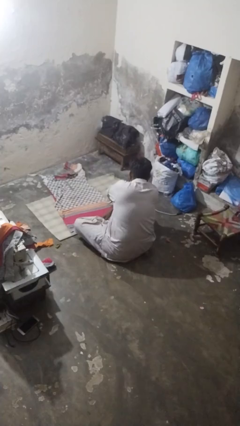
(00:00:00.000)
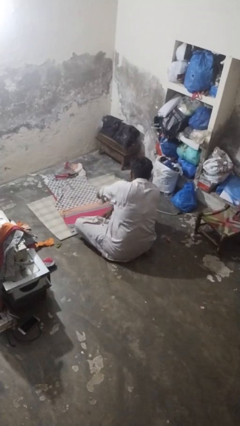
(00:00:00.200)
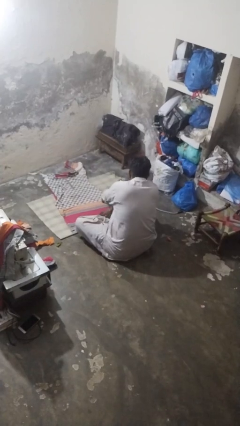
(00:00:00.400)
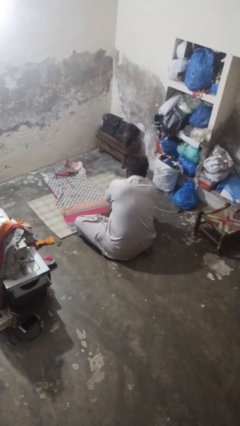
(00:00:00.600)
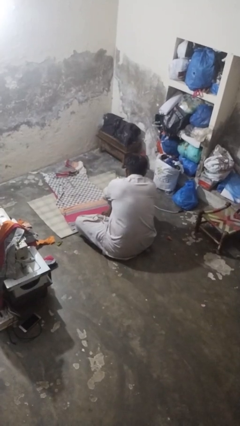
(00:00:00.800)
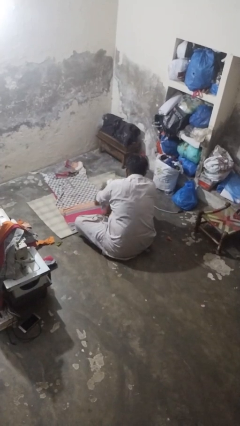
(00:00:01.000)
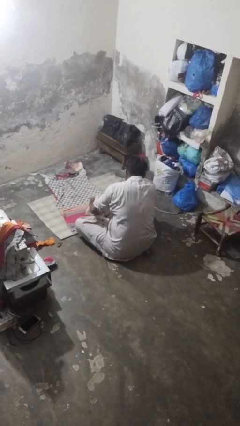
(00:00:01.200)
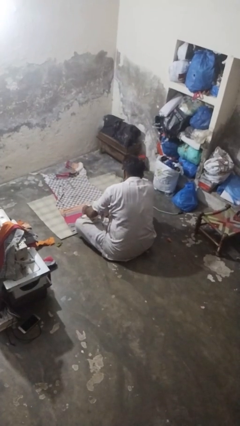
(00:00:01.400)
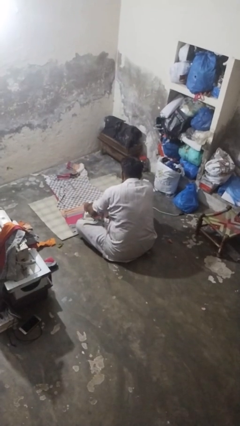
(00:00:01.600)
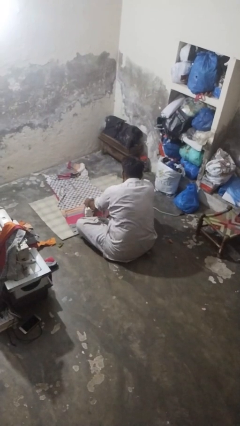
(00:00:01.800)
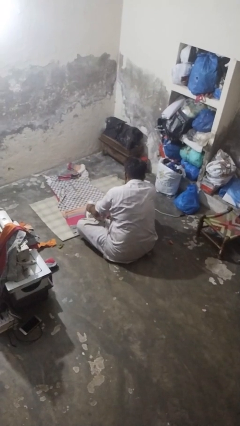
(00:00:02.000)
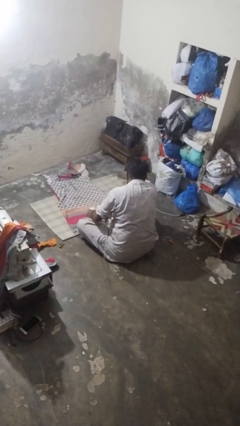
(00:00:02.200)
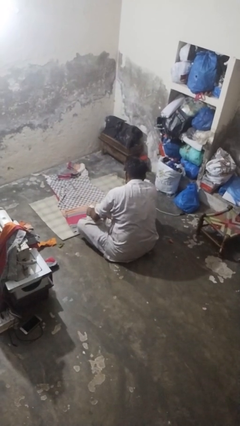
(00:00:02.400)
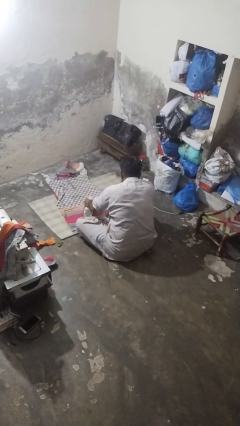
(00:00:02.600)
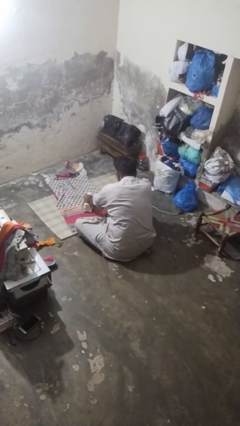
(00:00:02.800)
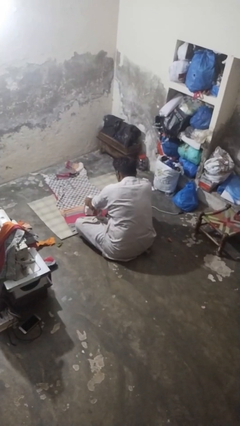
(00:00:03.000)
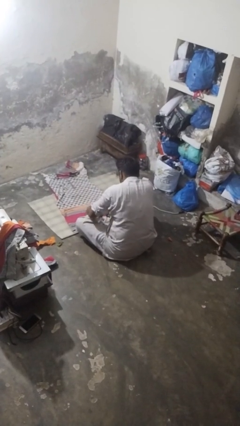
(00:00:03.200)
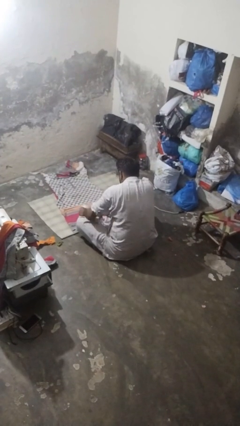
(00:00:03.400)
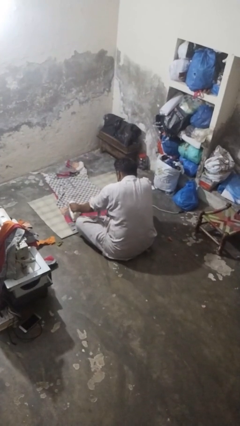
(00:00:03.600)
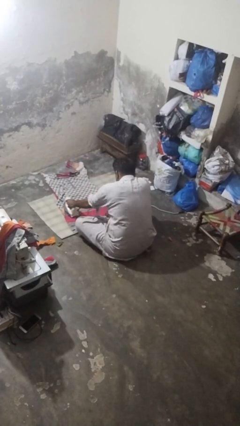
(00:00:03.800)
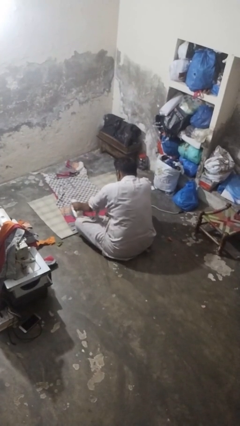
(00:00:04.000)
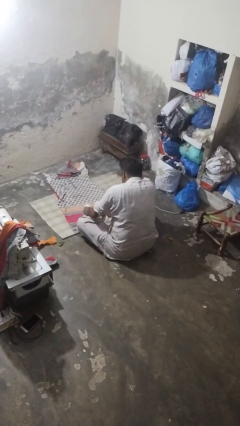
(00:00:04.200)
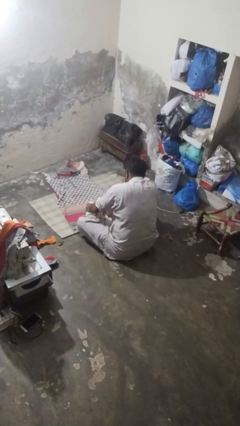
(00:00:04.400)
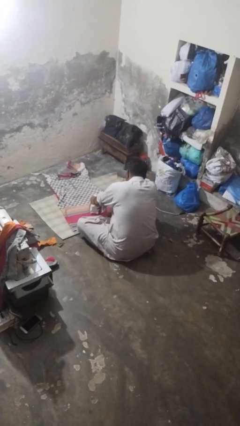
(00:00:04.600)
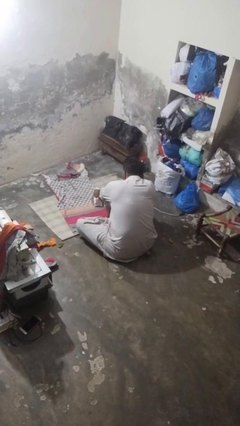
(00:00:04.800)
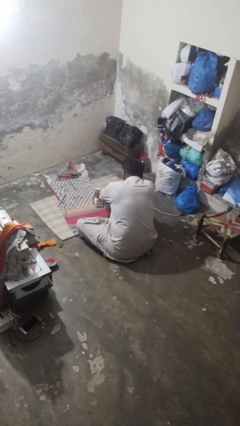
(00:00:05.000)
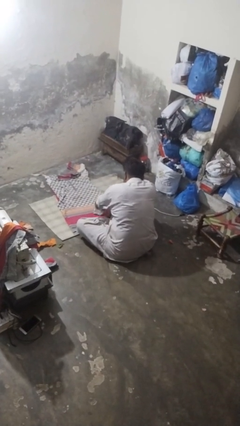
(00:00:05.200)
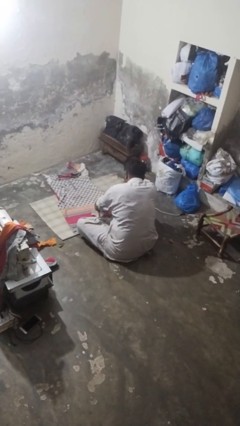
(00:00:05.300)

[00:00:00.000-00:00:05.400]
person irons clothes

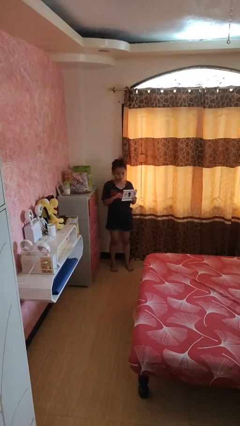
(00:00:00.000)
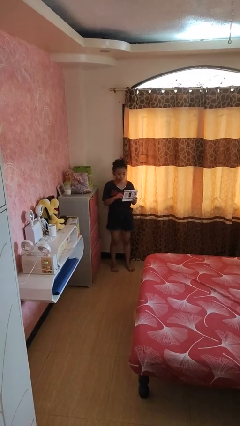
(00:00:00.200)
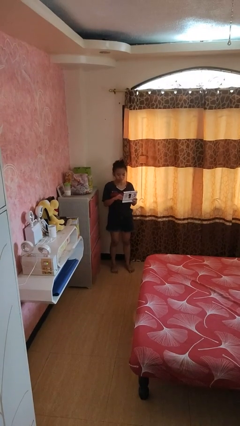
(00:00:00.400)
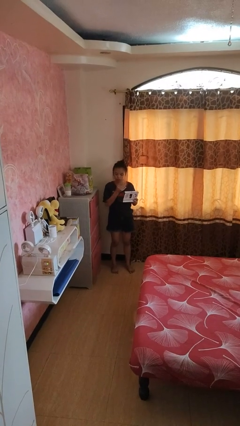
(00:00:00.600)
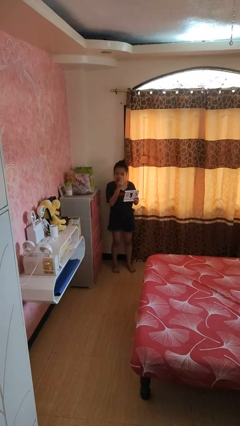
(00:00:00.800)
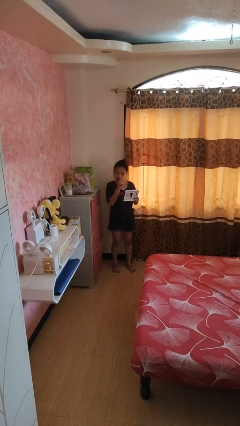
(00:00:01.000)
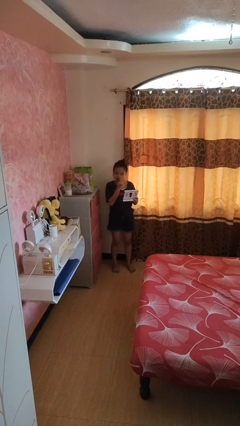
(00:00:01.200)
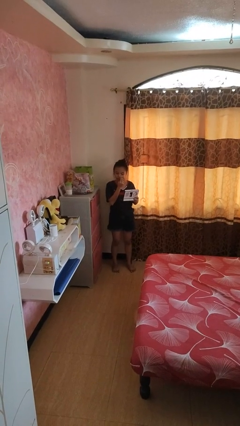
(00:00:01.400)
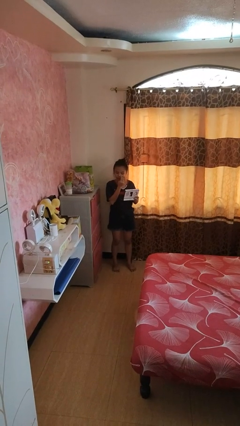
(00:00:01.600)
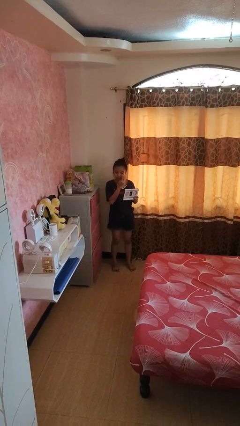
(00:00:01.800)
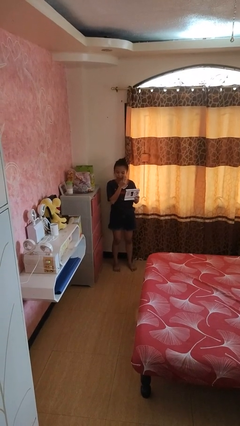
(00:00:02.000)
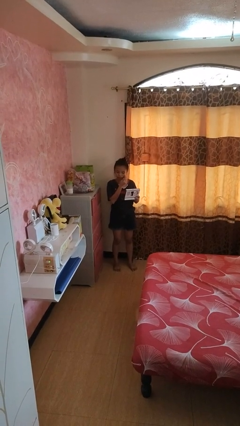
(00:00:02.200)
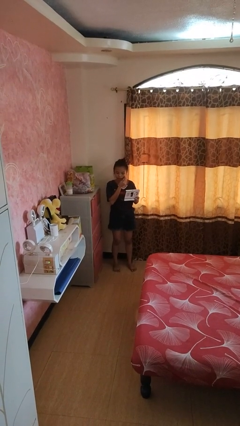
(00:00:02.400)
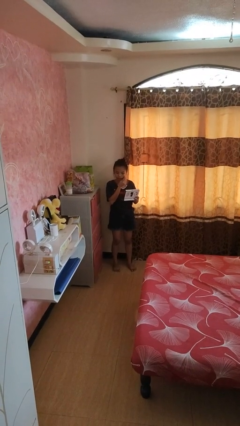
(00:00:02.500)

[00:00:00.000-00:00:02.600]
person applies foundation makeup

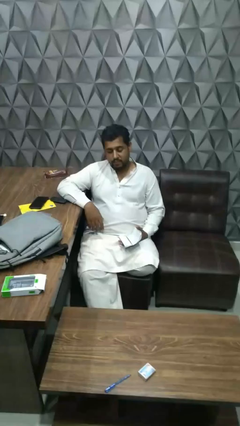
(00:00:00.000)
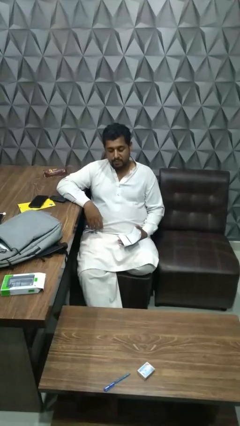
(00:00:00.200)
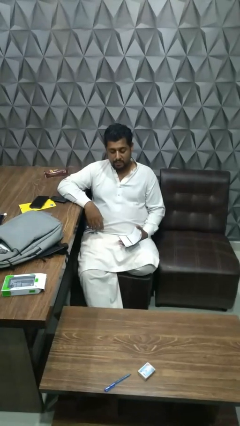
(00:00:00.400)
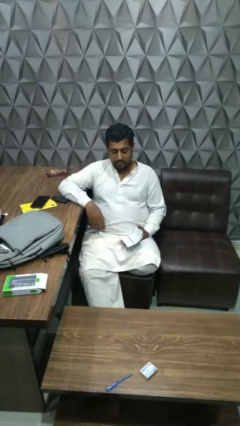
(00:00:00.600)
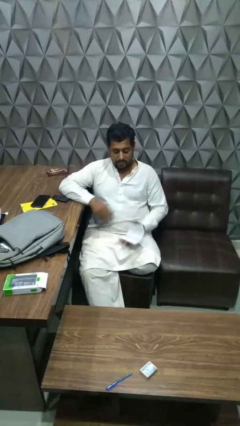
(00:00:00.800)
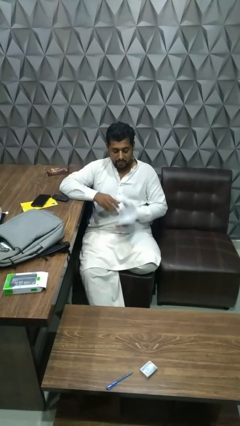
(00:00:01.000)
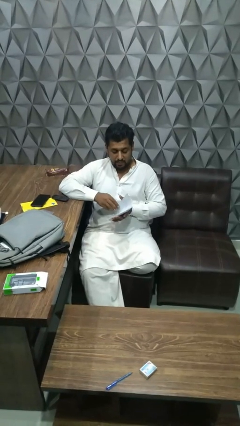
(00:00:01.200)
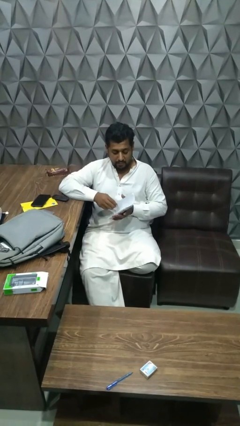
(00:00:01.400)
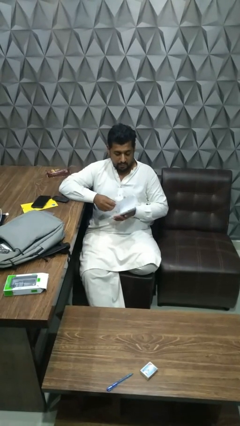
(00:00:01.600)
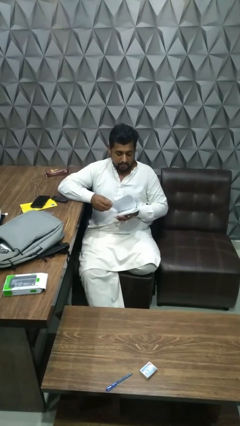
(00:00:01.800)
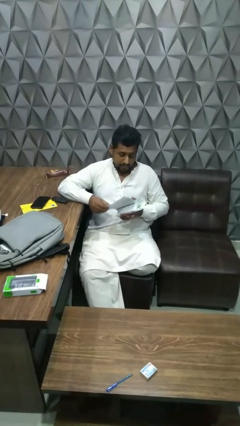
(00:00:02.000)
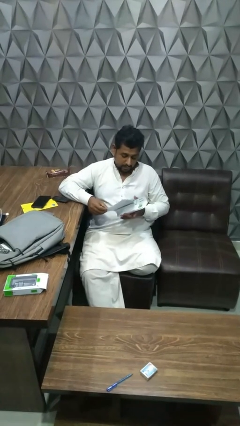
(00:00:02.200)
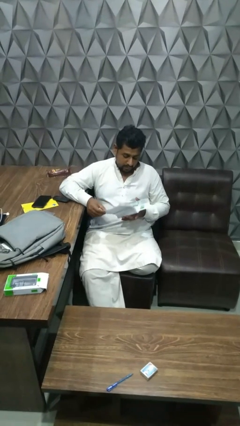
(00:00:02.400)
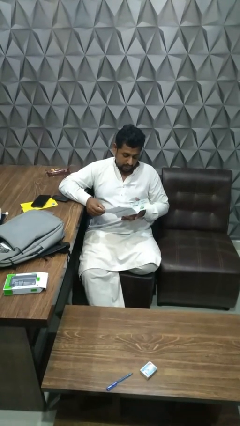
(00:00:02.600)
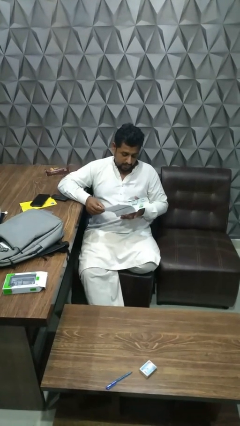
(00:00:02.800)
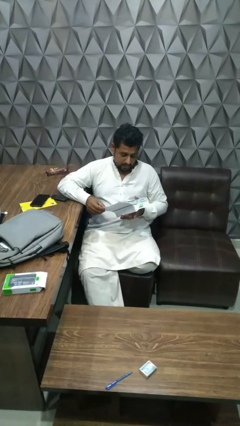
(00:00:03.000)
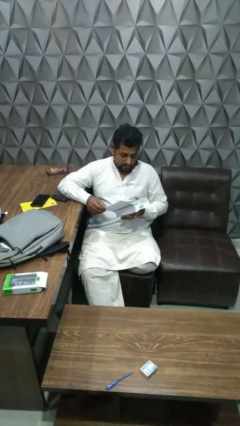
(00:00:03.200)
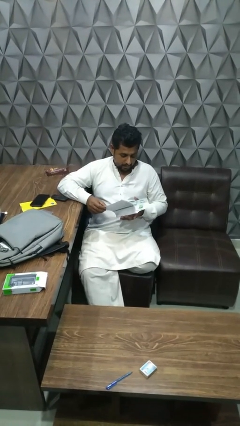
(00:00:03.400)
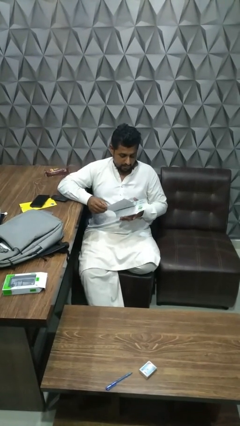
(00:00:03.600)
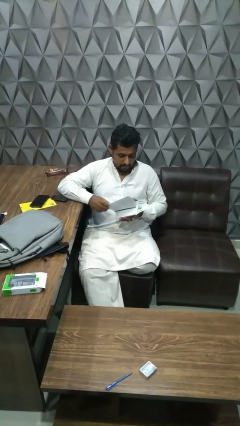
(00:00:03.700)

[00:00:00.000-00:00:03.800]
person reads magazine

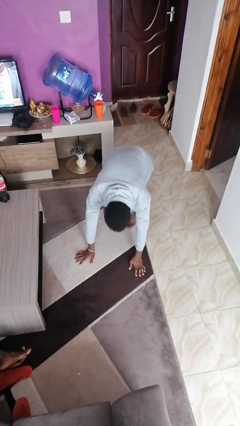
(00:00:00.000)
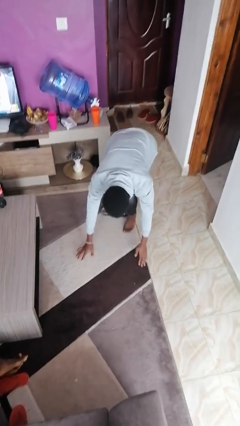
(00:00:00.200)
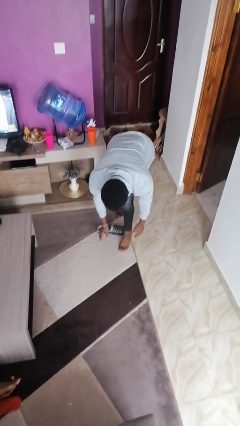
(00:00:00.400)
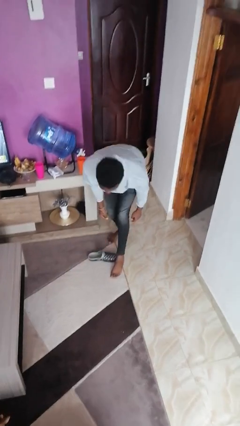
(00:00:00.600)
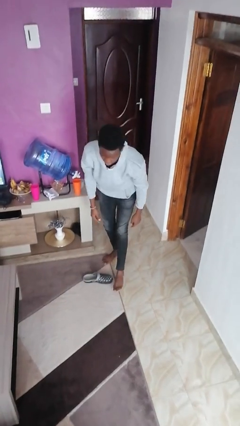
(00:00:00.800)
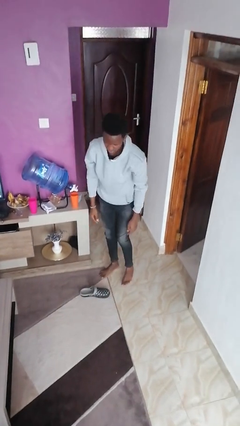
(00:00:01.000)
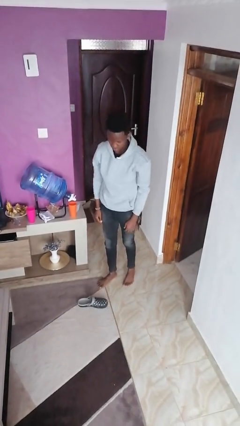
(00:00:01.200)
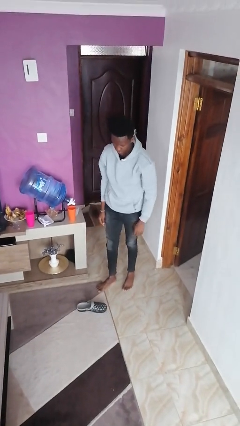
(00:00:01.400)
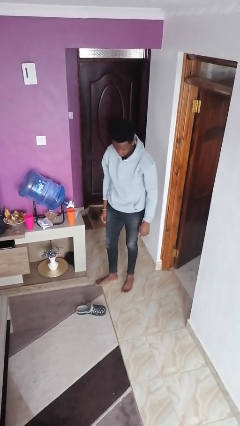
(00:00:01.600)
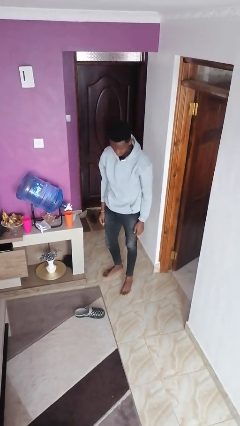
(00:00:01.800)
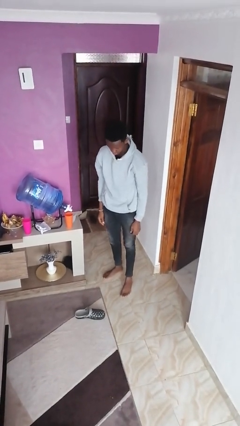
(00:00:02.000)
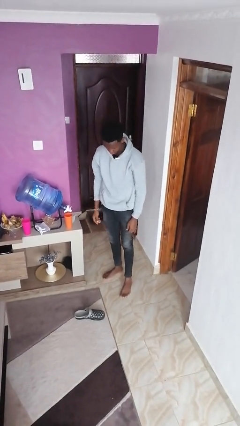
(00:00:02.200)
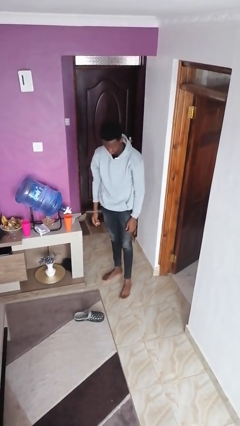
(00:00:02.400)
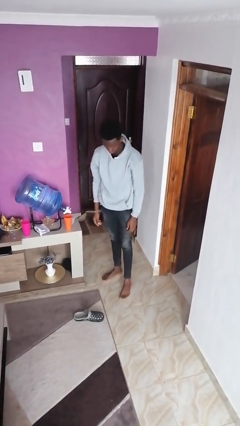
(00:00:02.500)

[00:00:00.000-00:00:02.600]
person stands up from floor

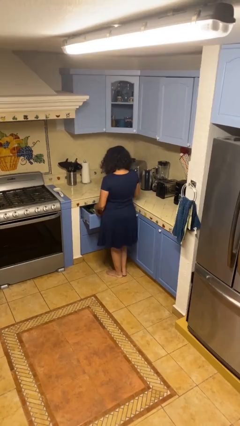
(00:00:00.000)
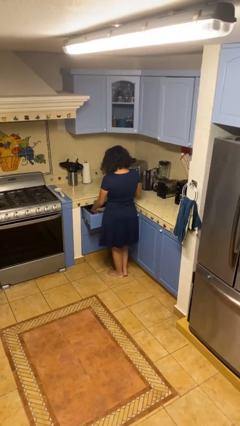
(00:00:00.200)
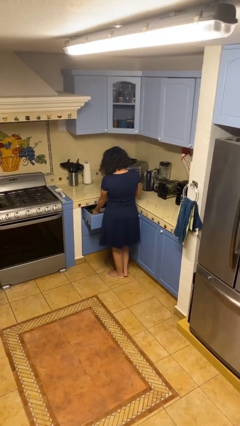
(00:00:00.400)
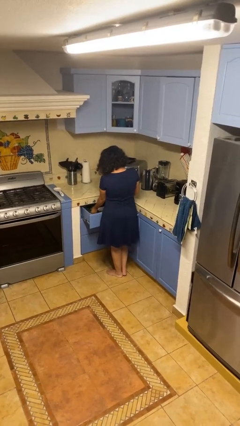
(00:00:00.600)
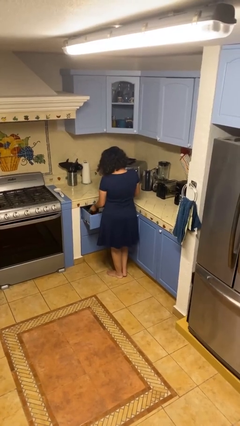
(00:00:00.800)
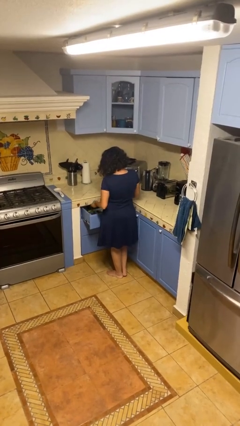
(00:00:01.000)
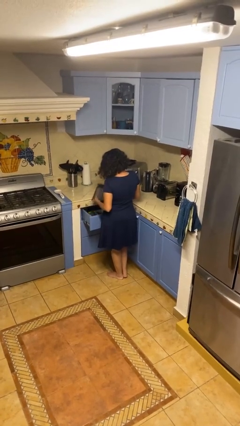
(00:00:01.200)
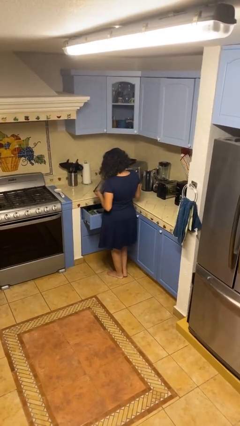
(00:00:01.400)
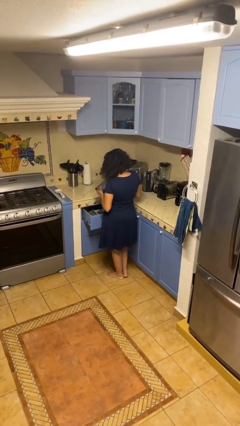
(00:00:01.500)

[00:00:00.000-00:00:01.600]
person takes object from kitchen drawer

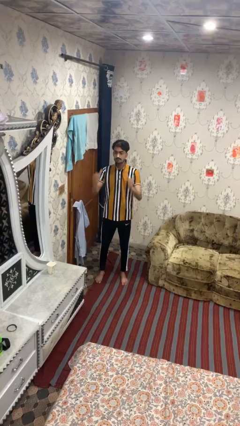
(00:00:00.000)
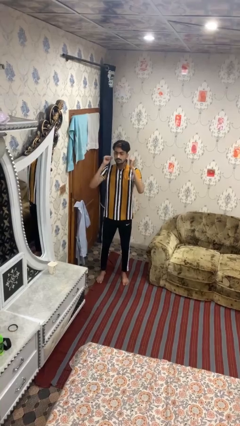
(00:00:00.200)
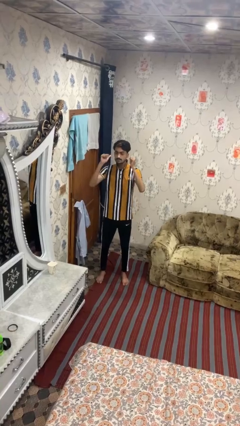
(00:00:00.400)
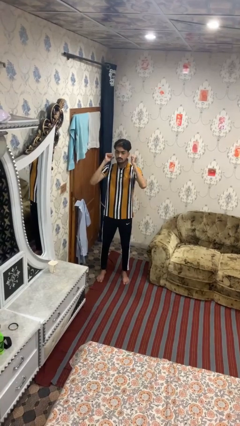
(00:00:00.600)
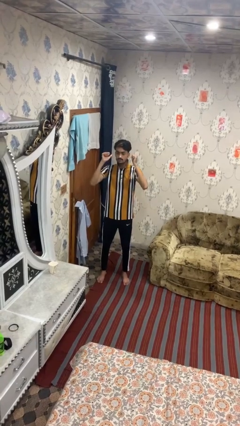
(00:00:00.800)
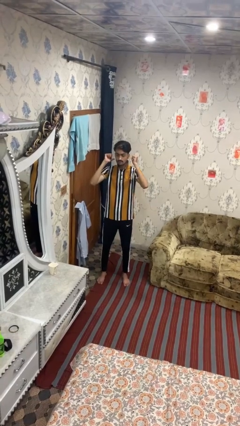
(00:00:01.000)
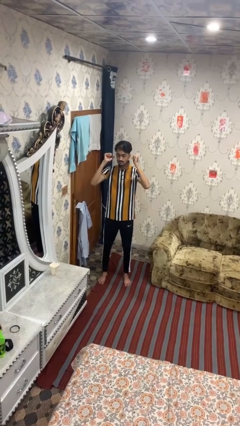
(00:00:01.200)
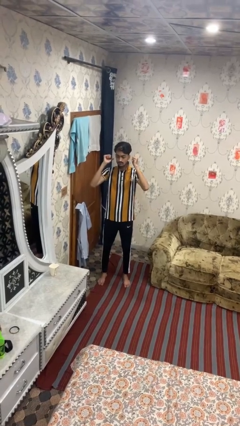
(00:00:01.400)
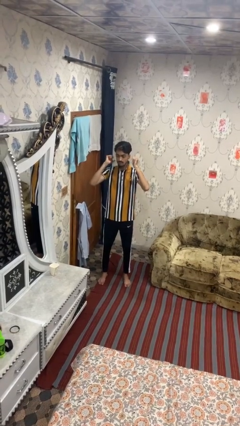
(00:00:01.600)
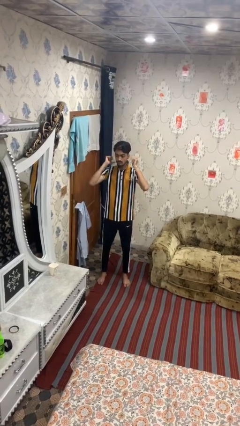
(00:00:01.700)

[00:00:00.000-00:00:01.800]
person gestures behind me
